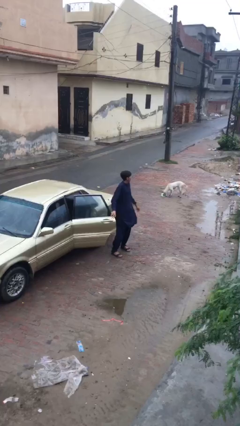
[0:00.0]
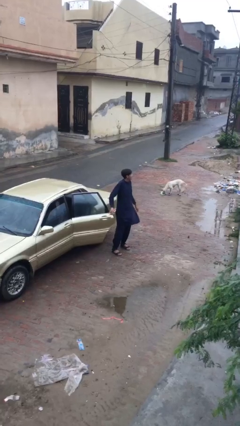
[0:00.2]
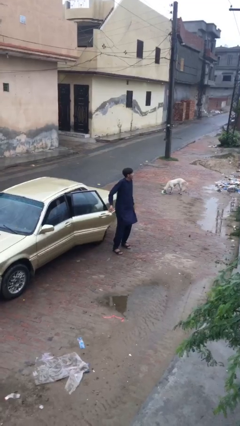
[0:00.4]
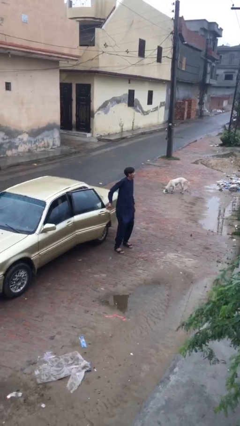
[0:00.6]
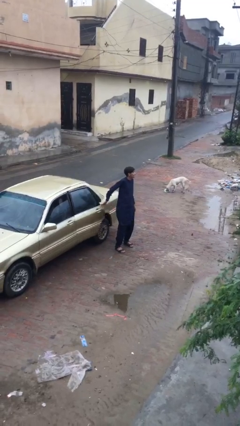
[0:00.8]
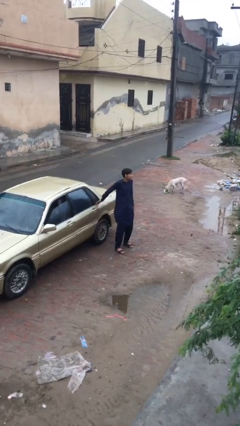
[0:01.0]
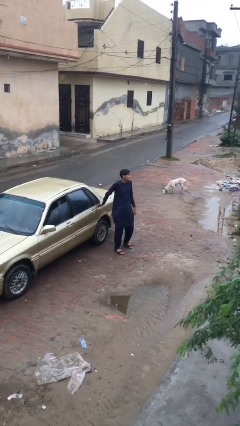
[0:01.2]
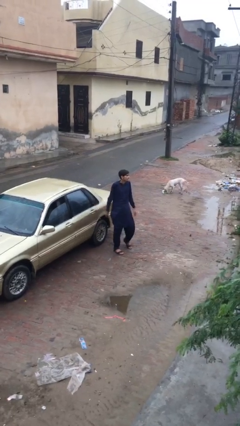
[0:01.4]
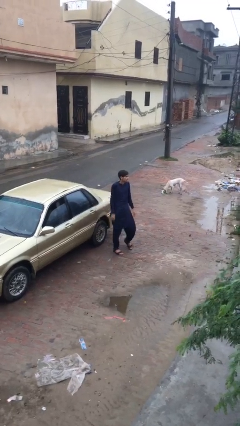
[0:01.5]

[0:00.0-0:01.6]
person closes car door

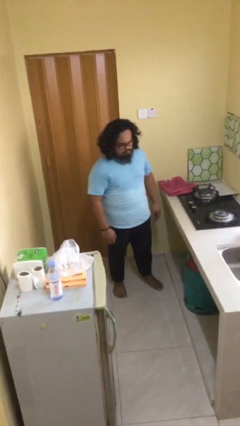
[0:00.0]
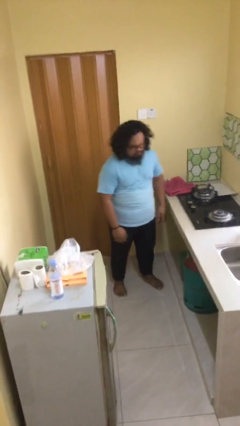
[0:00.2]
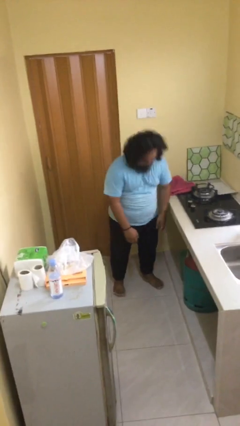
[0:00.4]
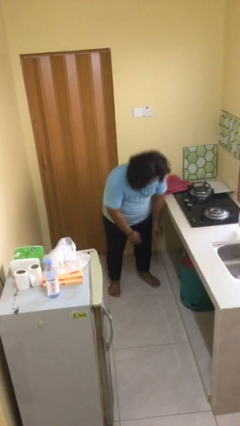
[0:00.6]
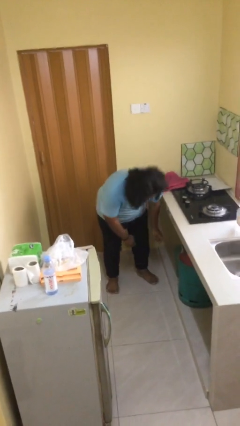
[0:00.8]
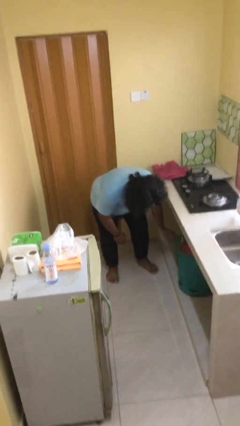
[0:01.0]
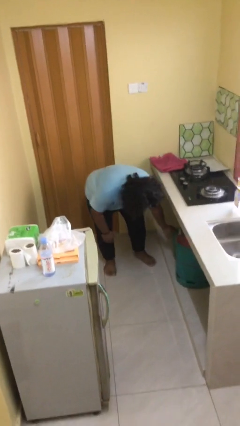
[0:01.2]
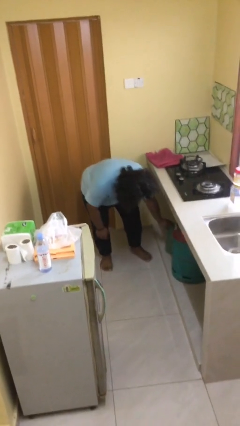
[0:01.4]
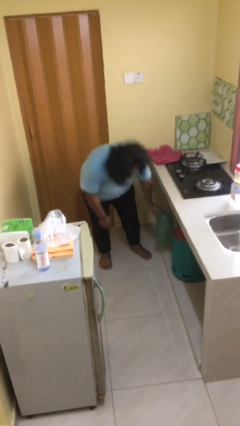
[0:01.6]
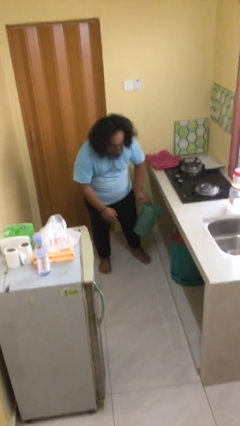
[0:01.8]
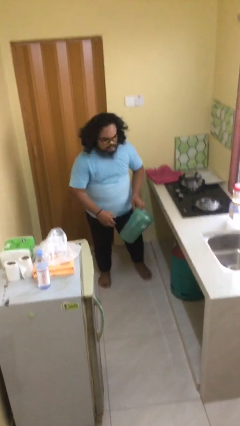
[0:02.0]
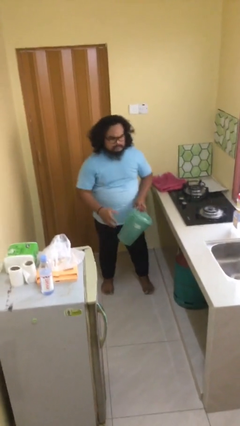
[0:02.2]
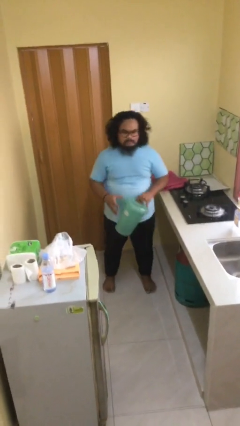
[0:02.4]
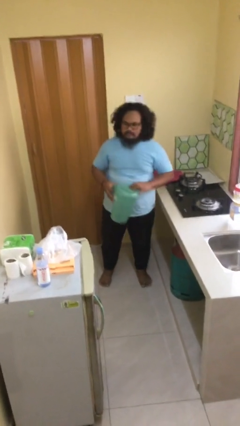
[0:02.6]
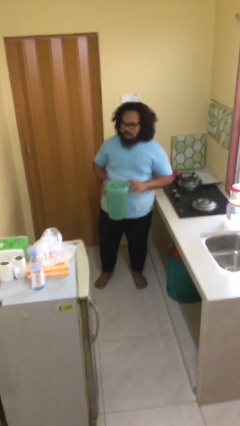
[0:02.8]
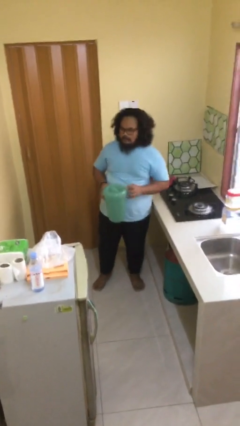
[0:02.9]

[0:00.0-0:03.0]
person picks up object from cabinet

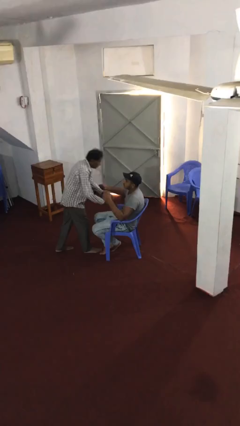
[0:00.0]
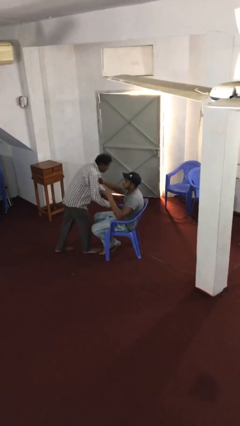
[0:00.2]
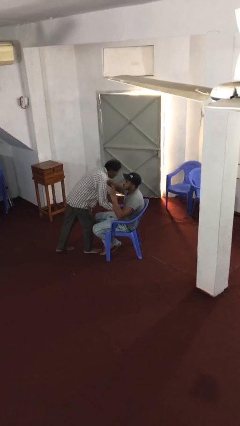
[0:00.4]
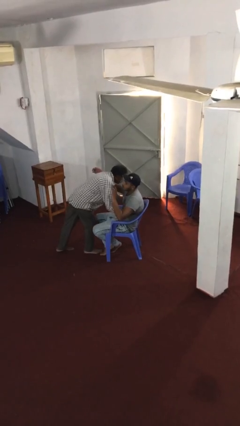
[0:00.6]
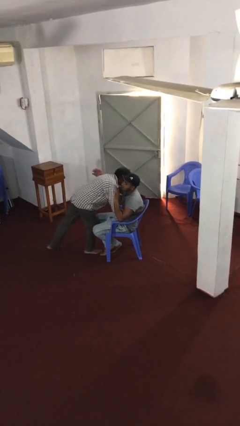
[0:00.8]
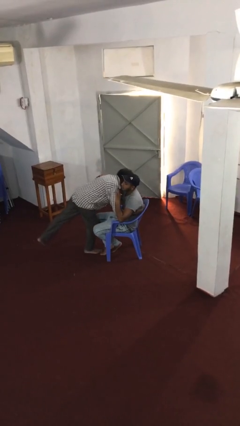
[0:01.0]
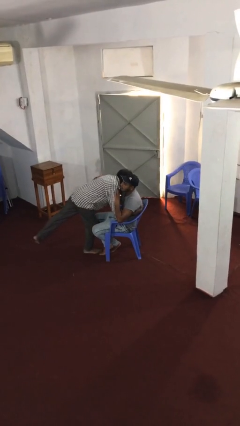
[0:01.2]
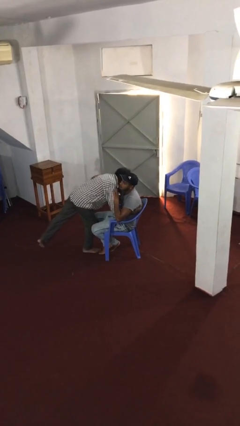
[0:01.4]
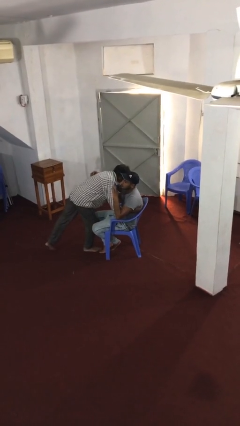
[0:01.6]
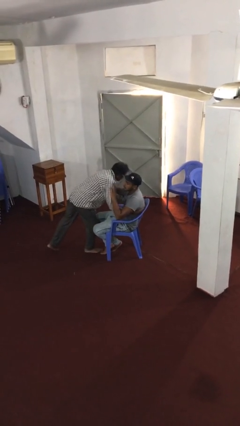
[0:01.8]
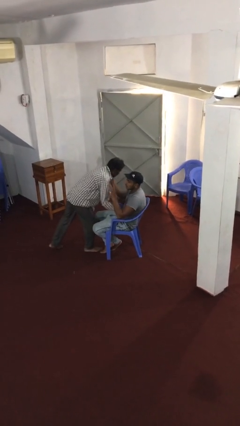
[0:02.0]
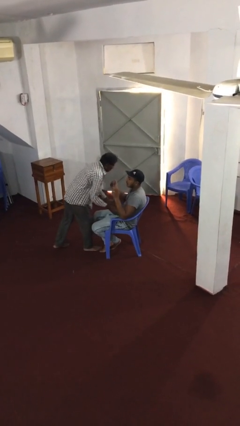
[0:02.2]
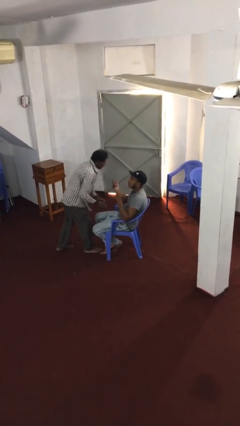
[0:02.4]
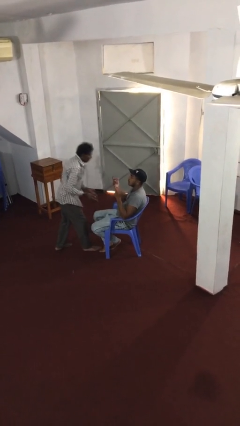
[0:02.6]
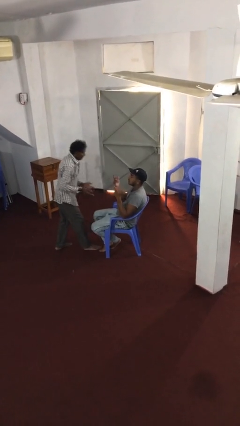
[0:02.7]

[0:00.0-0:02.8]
person embraces person

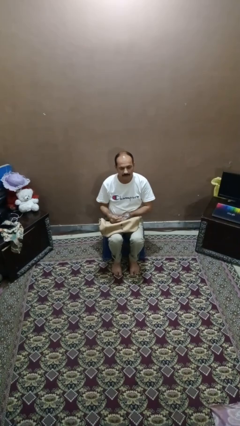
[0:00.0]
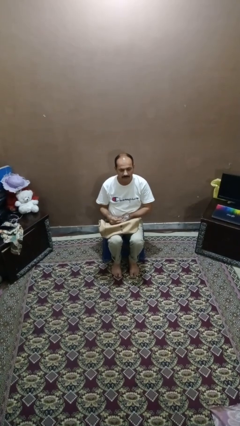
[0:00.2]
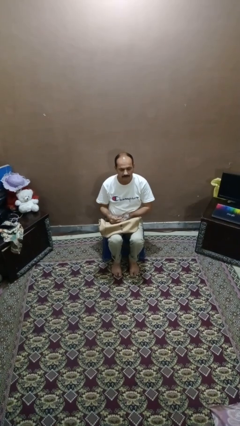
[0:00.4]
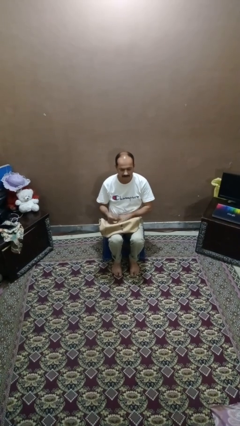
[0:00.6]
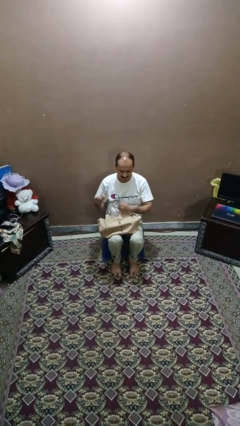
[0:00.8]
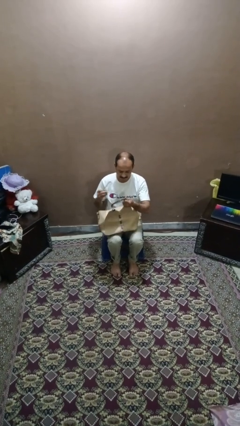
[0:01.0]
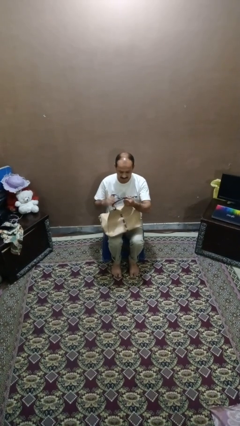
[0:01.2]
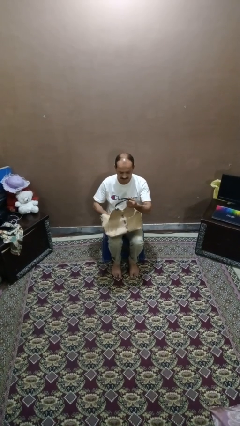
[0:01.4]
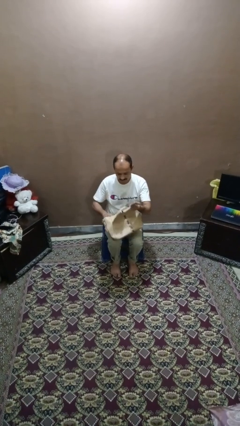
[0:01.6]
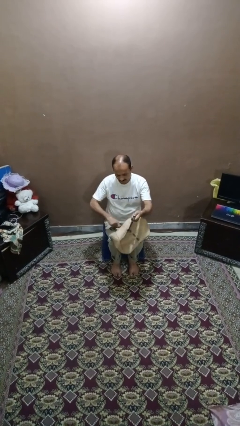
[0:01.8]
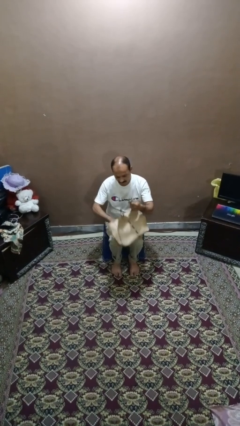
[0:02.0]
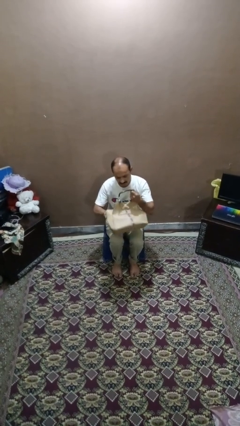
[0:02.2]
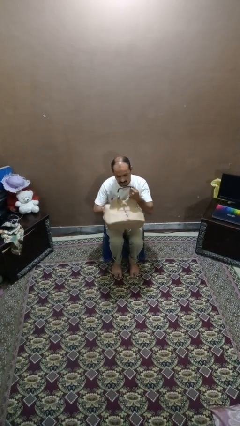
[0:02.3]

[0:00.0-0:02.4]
person puts object into purse

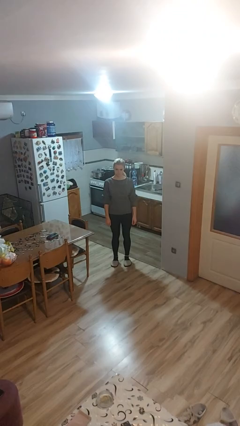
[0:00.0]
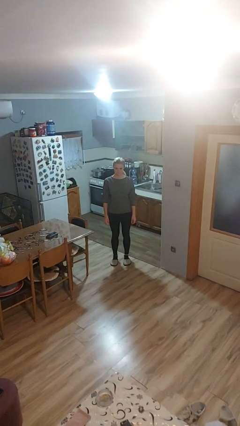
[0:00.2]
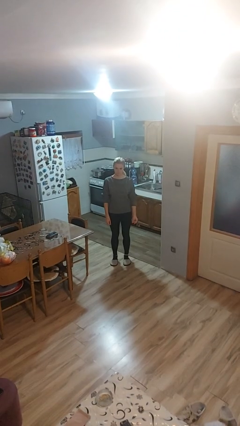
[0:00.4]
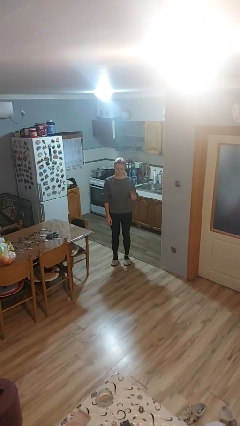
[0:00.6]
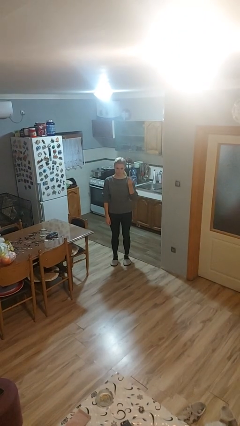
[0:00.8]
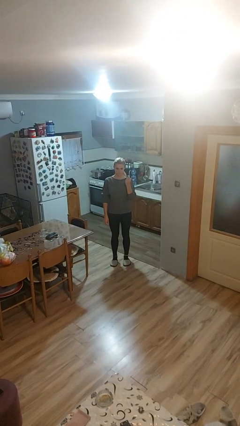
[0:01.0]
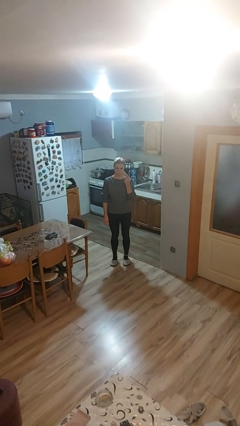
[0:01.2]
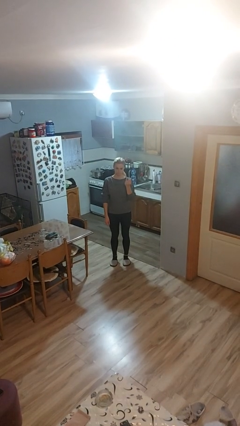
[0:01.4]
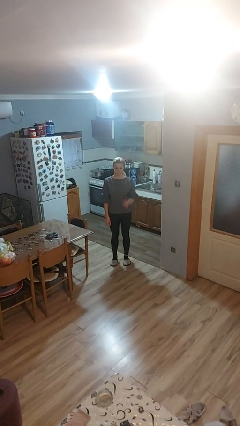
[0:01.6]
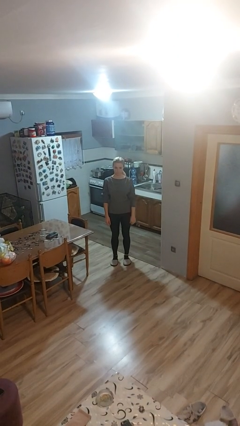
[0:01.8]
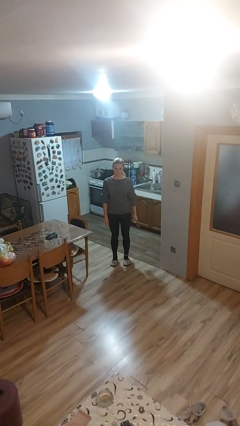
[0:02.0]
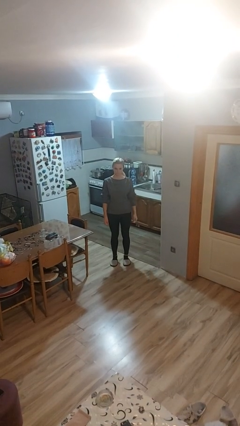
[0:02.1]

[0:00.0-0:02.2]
person snaps fingers

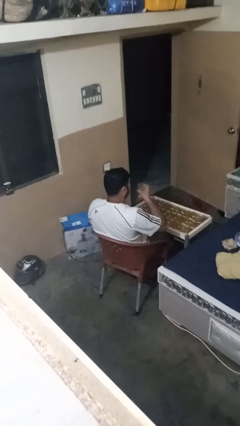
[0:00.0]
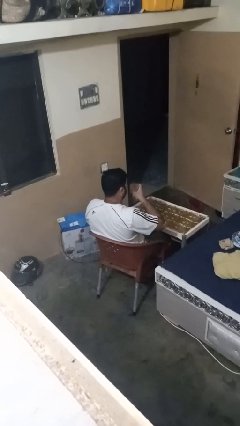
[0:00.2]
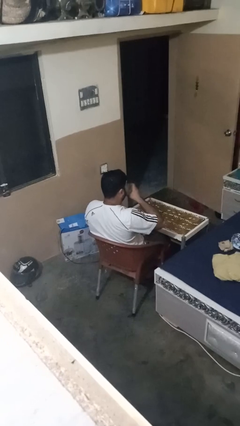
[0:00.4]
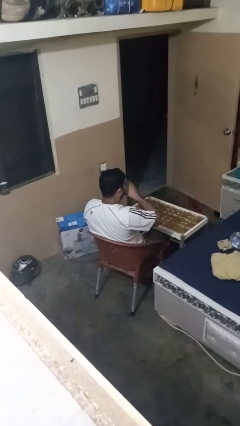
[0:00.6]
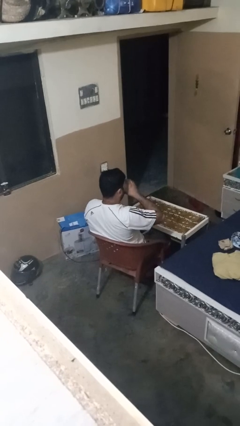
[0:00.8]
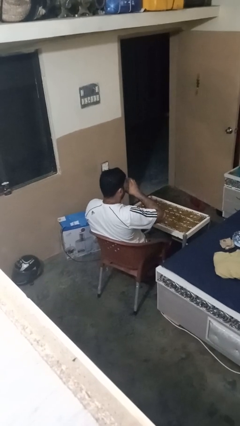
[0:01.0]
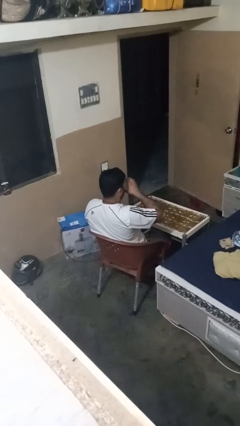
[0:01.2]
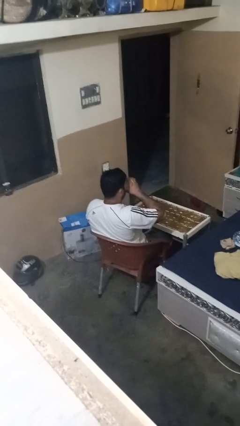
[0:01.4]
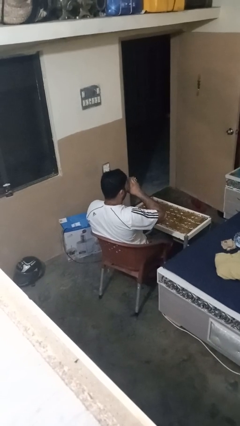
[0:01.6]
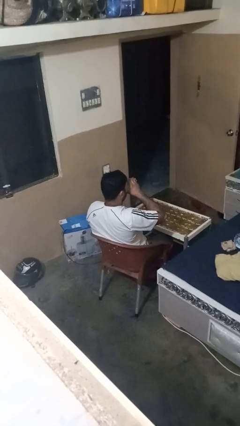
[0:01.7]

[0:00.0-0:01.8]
person drinks from shotglass

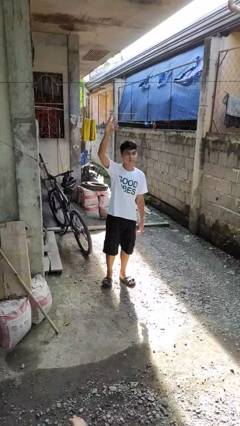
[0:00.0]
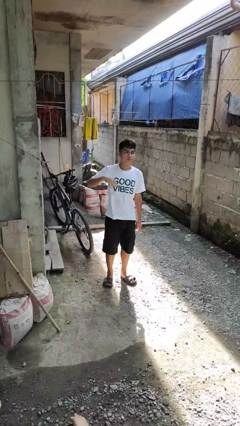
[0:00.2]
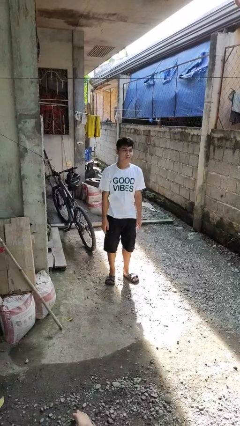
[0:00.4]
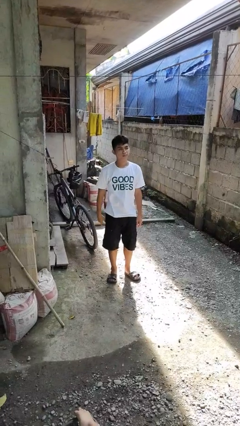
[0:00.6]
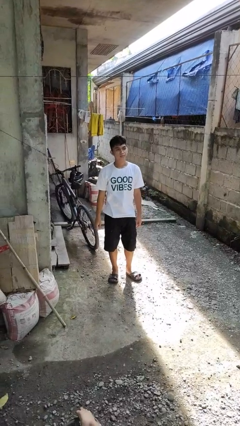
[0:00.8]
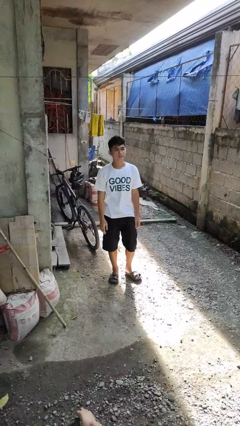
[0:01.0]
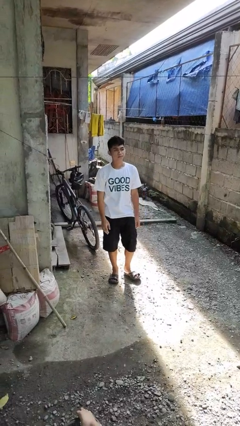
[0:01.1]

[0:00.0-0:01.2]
person gestures lower hand

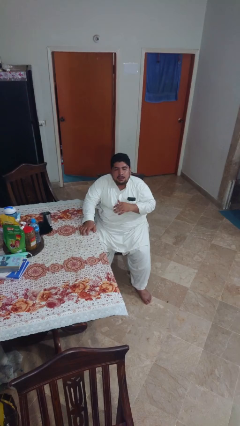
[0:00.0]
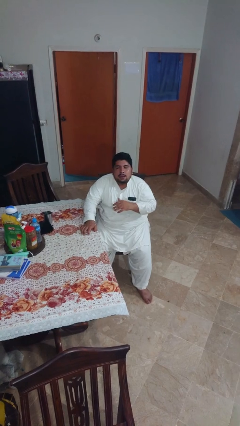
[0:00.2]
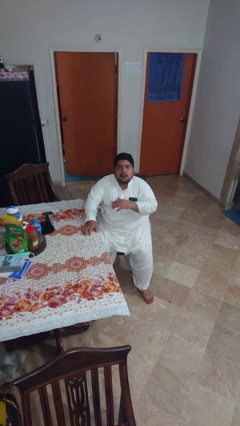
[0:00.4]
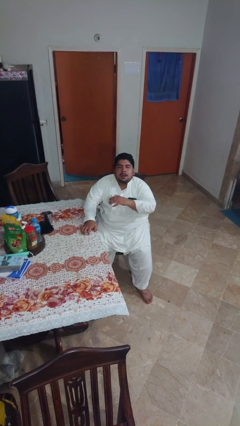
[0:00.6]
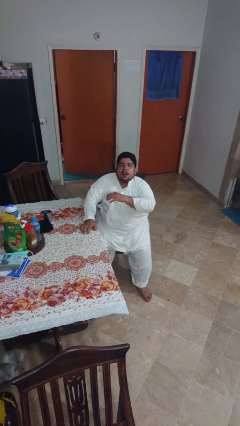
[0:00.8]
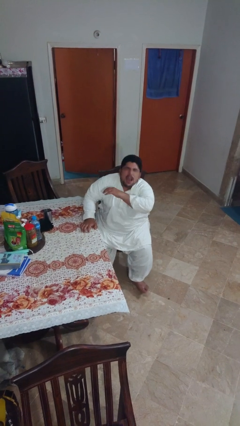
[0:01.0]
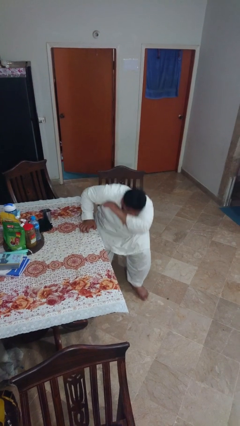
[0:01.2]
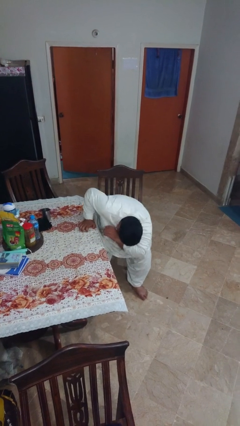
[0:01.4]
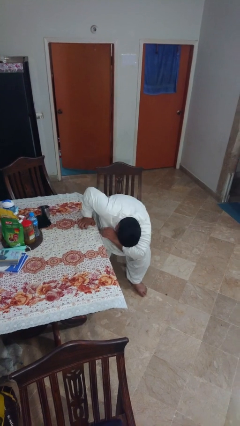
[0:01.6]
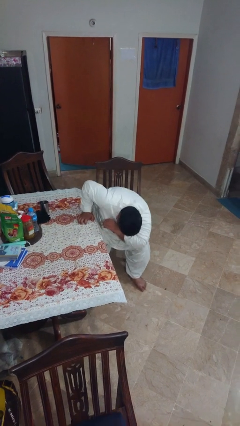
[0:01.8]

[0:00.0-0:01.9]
person sneezes into arm

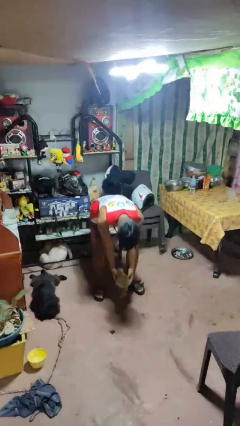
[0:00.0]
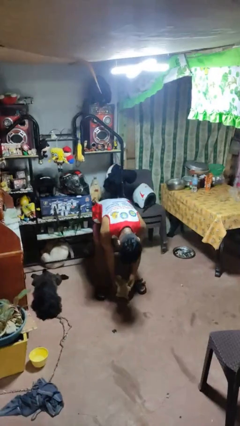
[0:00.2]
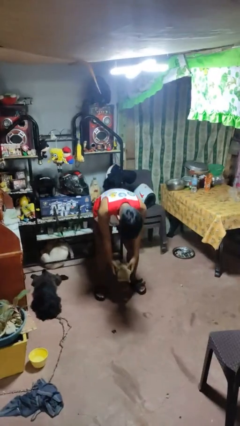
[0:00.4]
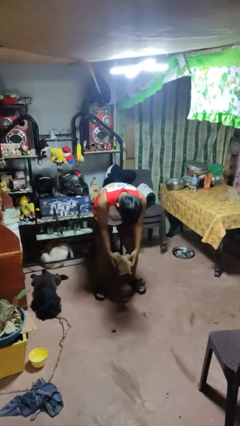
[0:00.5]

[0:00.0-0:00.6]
person catches dropped object
